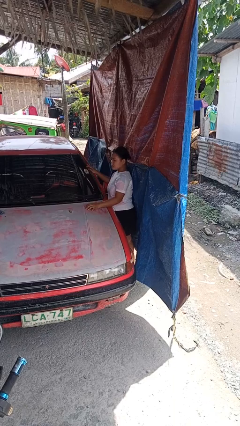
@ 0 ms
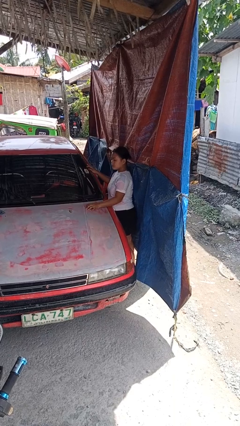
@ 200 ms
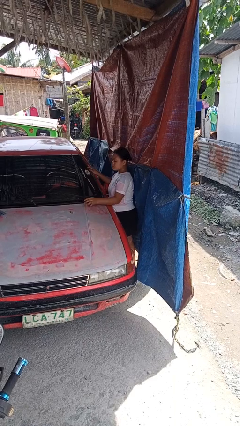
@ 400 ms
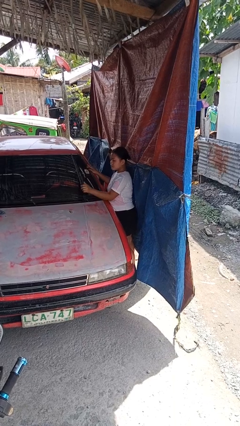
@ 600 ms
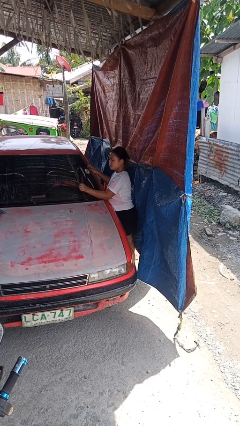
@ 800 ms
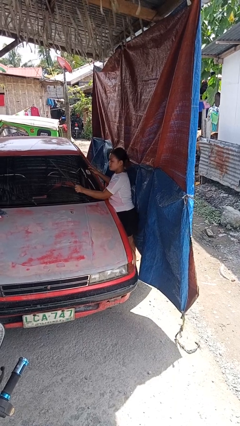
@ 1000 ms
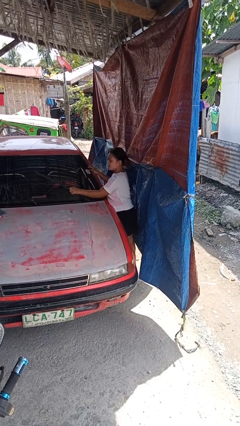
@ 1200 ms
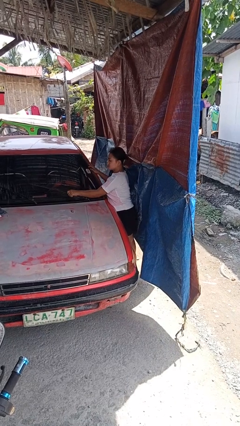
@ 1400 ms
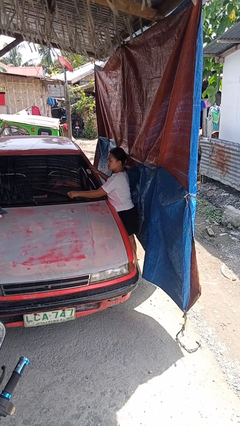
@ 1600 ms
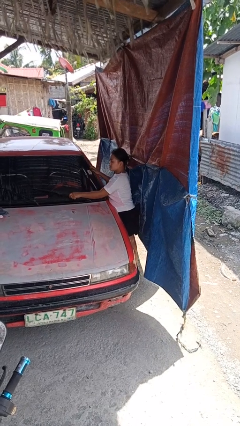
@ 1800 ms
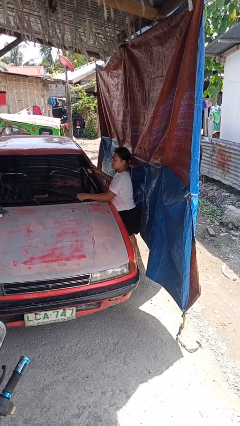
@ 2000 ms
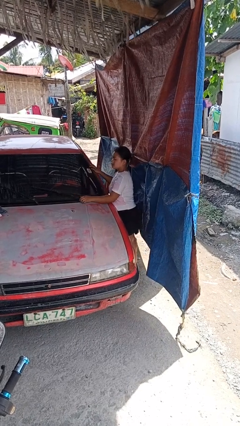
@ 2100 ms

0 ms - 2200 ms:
person flips down car wipers

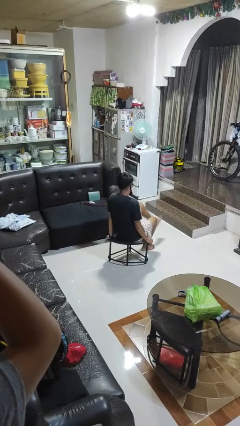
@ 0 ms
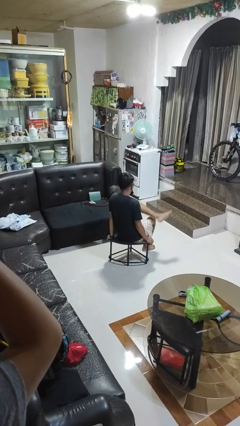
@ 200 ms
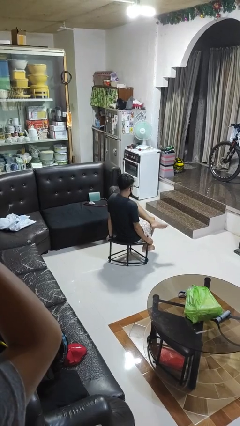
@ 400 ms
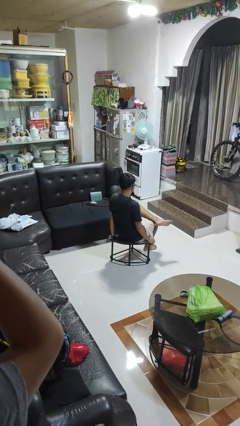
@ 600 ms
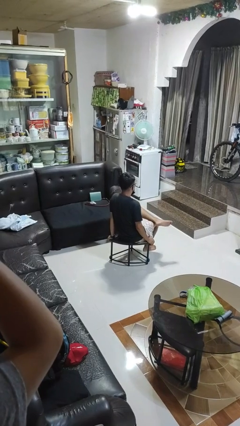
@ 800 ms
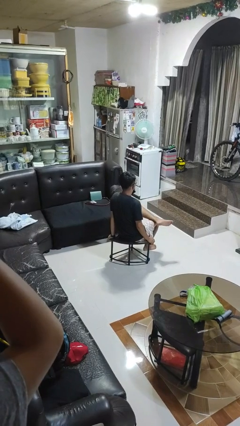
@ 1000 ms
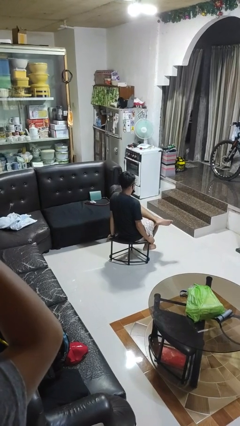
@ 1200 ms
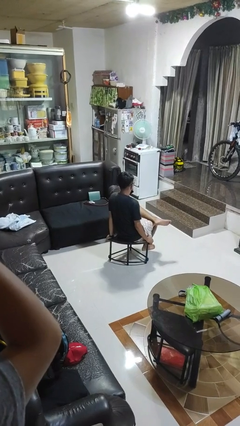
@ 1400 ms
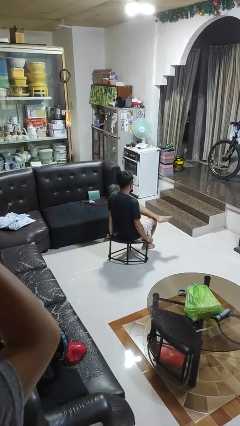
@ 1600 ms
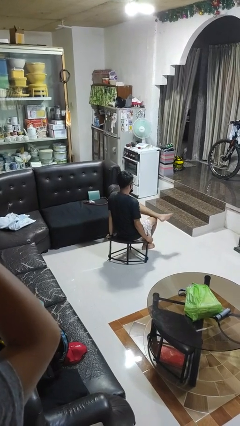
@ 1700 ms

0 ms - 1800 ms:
person crosses legs

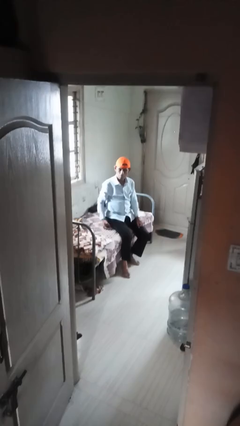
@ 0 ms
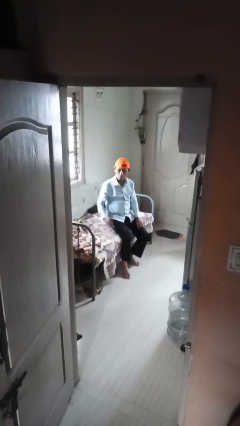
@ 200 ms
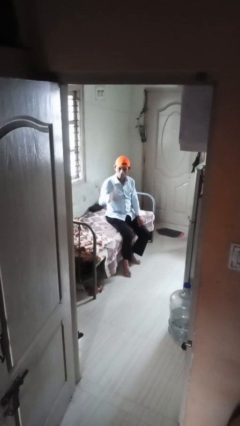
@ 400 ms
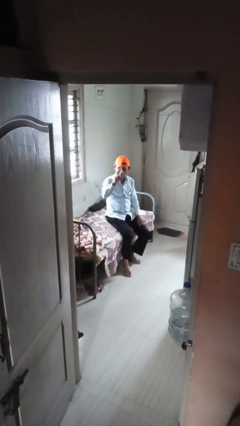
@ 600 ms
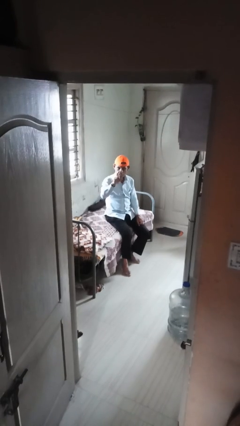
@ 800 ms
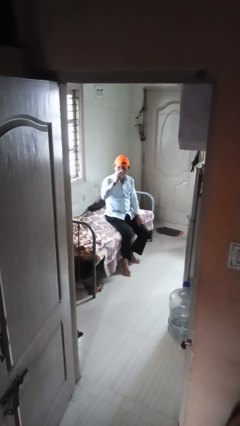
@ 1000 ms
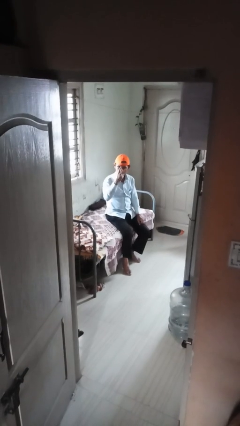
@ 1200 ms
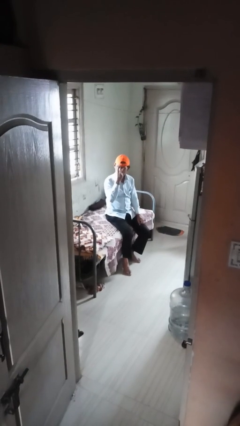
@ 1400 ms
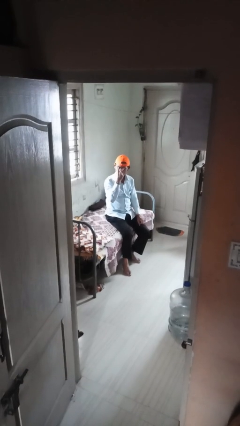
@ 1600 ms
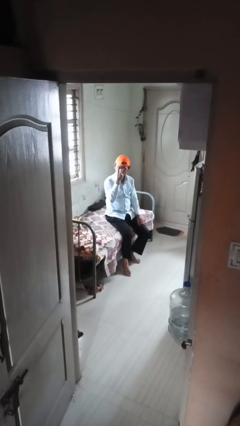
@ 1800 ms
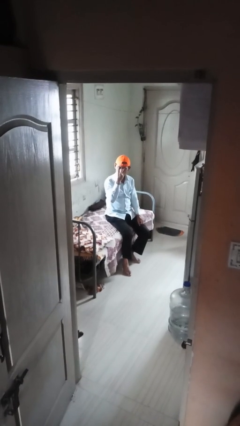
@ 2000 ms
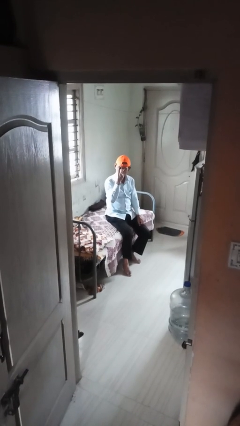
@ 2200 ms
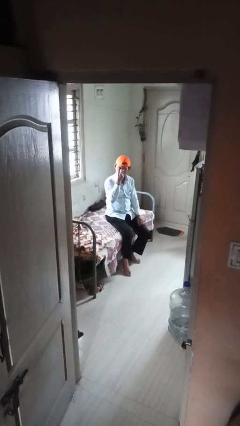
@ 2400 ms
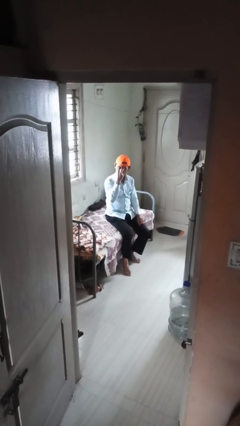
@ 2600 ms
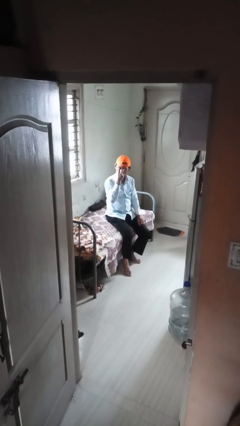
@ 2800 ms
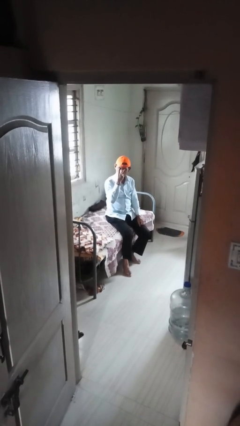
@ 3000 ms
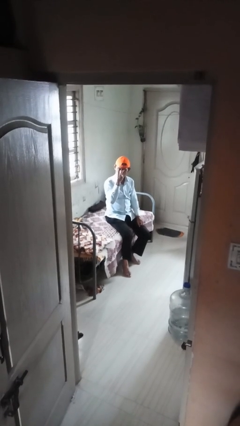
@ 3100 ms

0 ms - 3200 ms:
person gestures watch closely

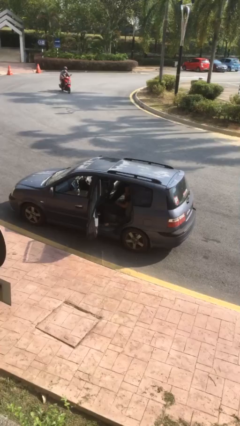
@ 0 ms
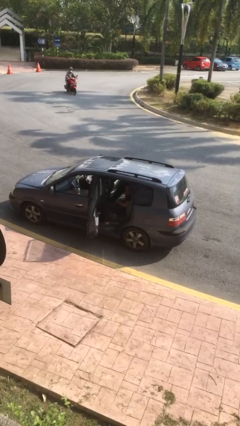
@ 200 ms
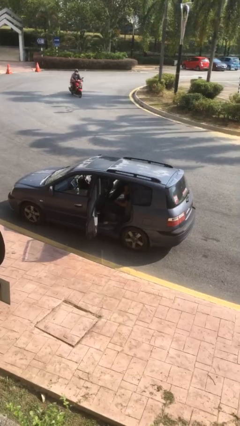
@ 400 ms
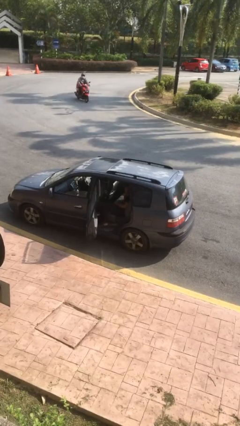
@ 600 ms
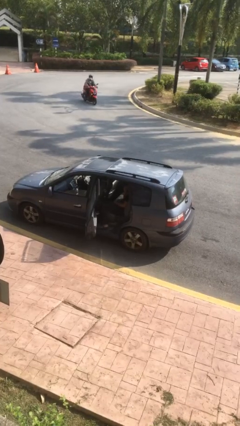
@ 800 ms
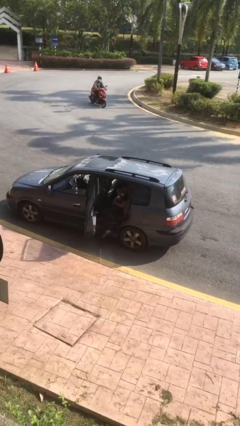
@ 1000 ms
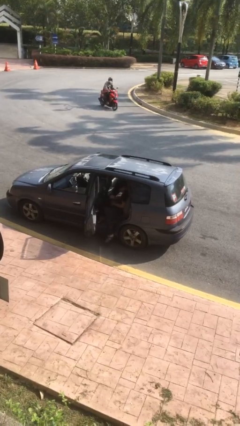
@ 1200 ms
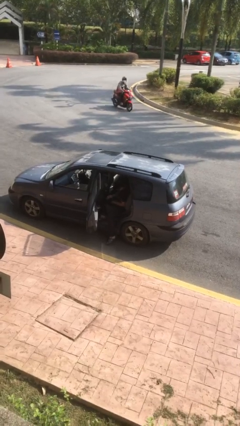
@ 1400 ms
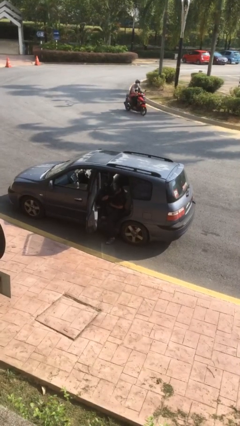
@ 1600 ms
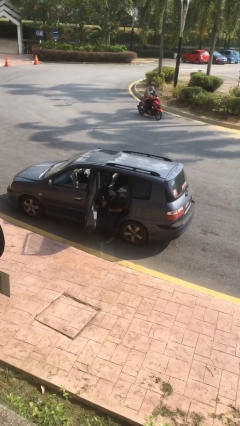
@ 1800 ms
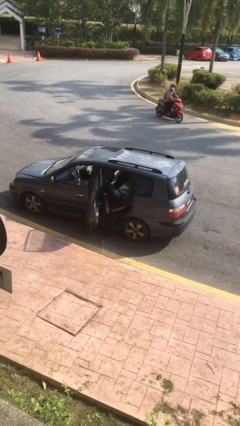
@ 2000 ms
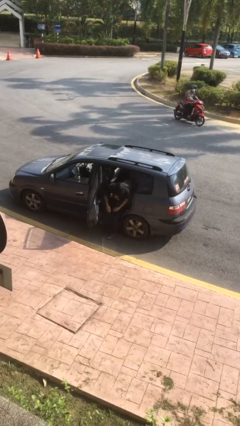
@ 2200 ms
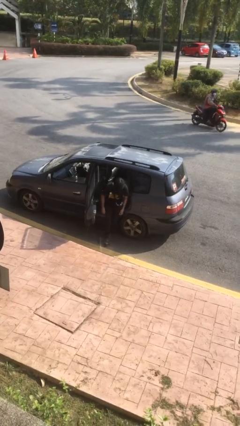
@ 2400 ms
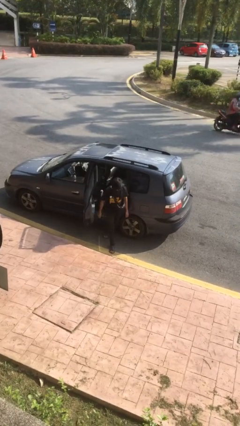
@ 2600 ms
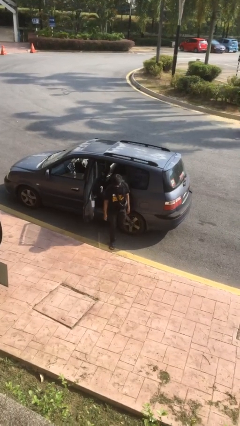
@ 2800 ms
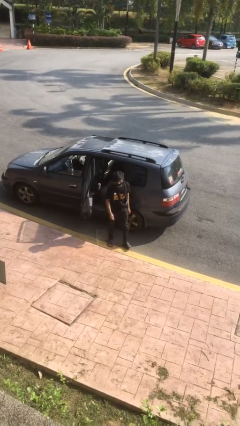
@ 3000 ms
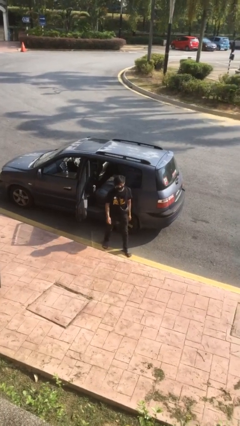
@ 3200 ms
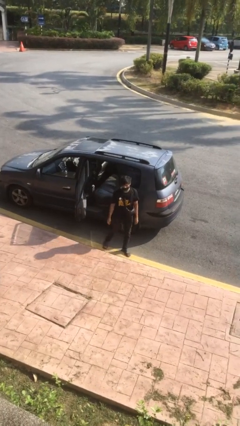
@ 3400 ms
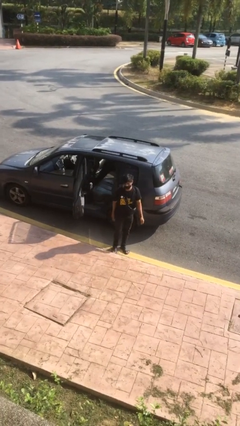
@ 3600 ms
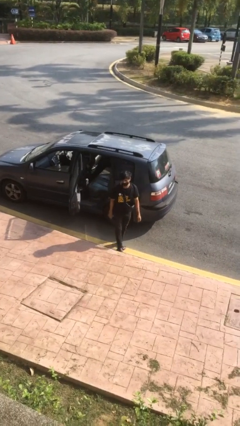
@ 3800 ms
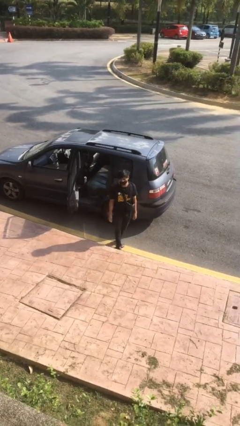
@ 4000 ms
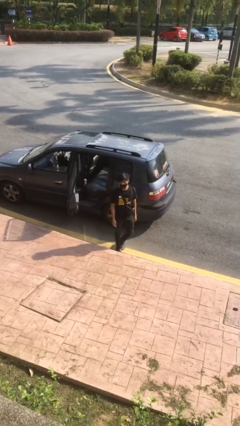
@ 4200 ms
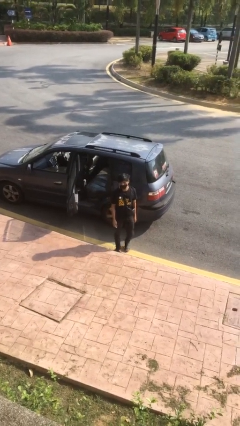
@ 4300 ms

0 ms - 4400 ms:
person exits car

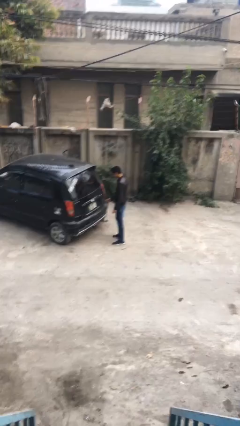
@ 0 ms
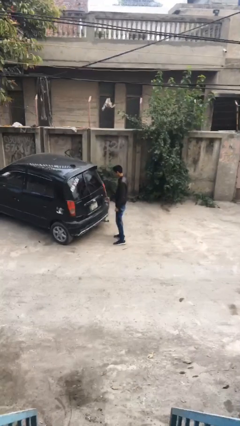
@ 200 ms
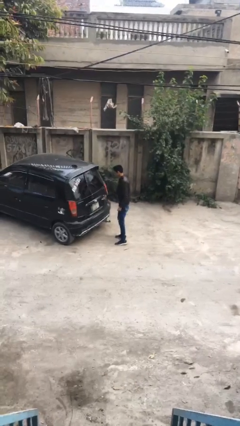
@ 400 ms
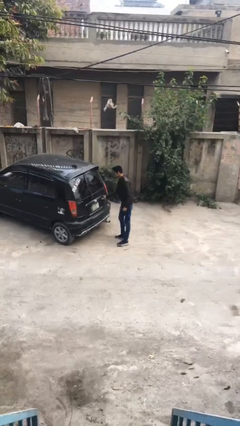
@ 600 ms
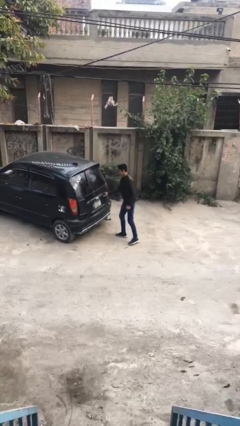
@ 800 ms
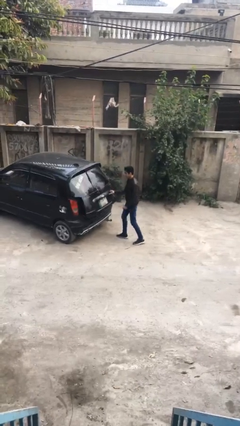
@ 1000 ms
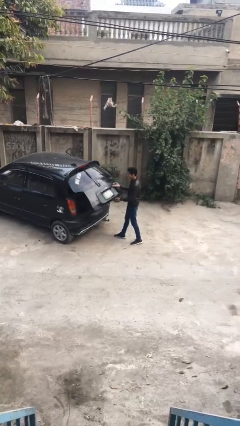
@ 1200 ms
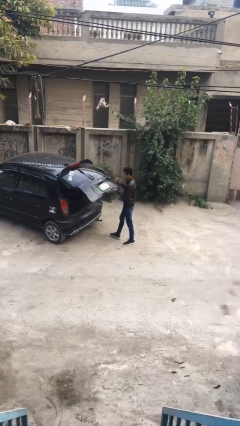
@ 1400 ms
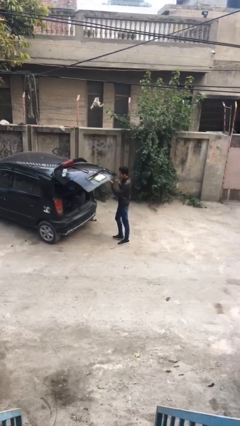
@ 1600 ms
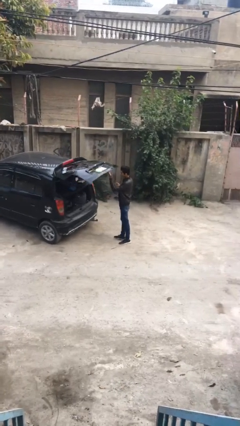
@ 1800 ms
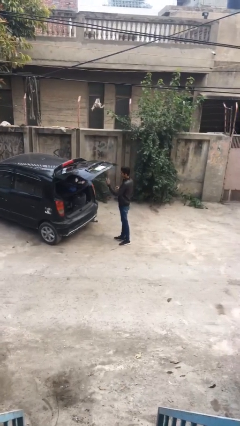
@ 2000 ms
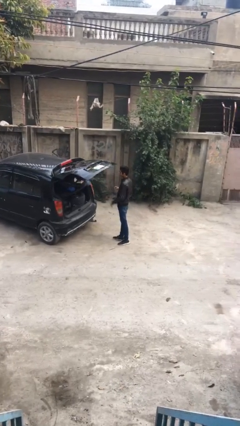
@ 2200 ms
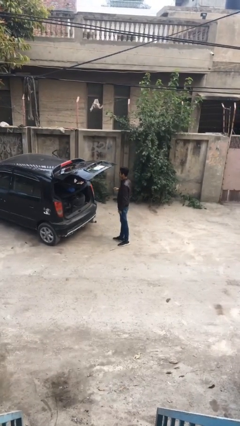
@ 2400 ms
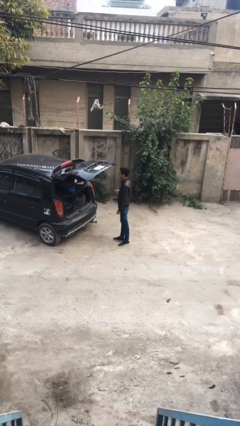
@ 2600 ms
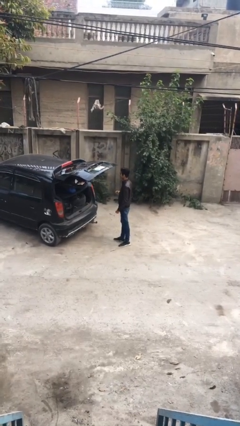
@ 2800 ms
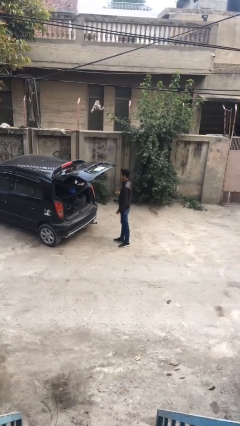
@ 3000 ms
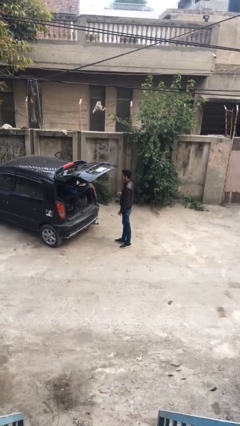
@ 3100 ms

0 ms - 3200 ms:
person opens car trunk

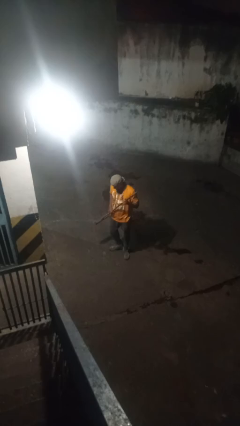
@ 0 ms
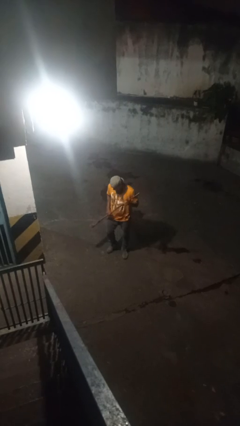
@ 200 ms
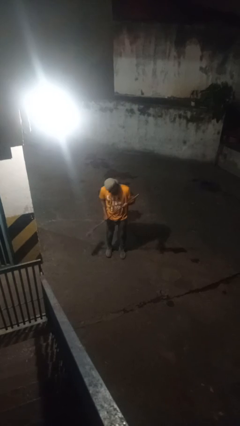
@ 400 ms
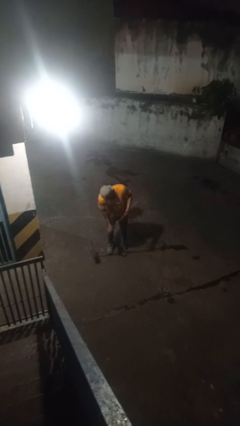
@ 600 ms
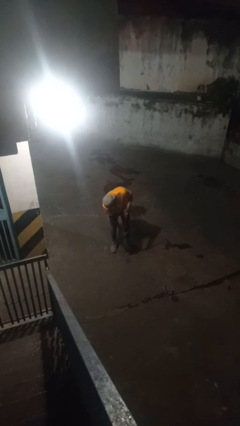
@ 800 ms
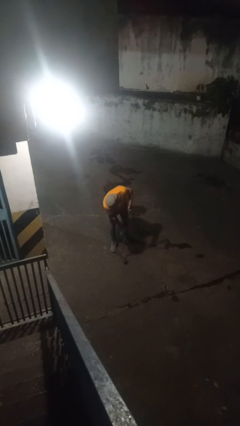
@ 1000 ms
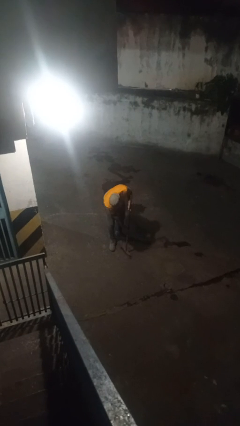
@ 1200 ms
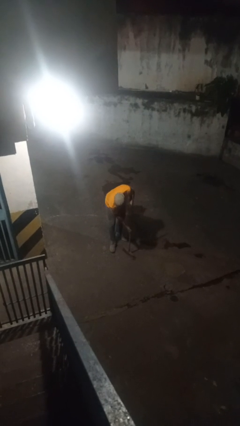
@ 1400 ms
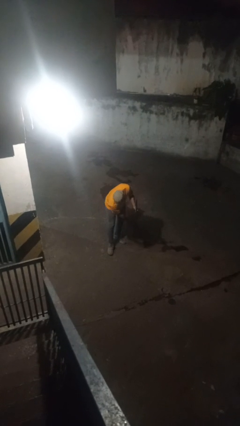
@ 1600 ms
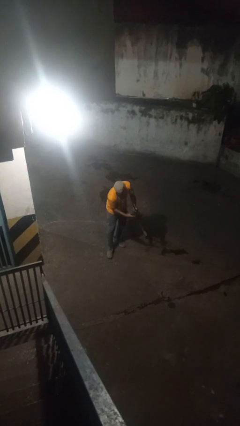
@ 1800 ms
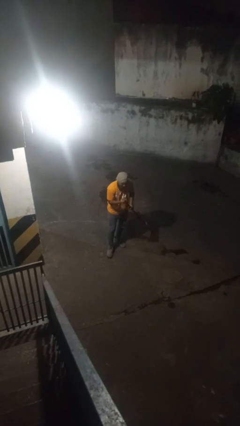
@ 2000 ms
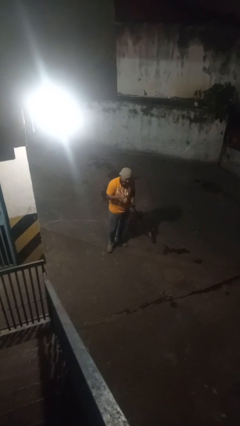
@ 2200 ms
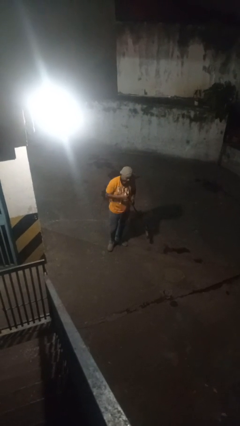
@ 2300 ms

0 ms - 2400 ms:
person sweeps floor
